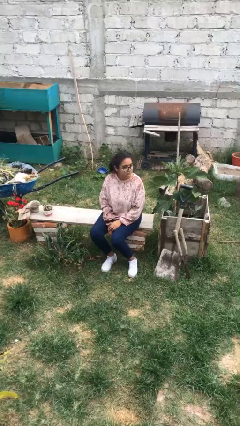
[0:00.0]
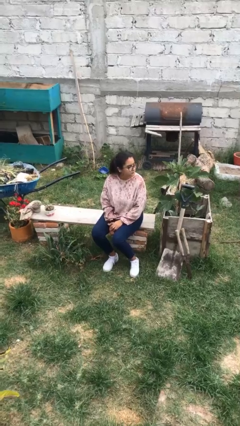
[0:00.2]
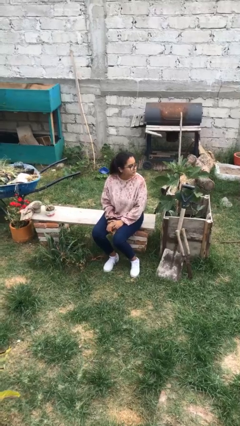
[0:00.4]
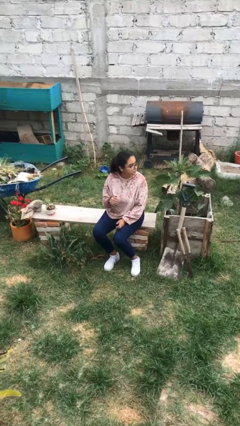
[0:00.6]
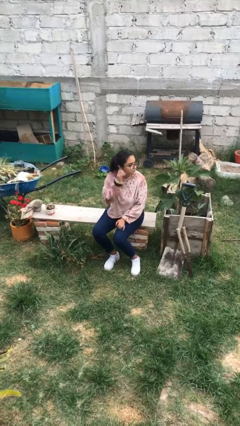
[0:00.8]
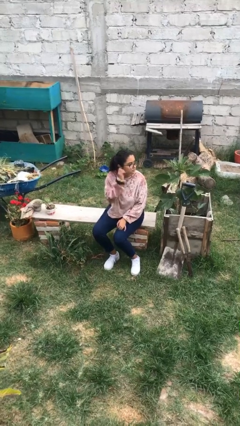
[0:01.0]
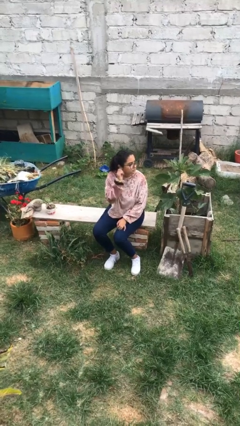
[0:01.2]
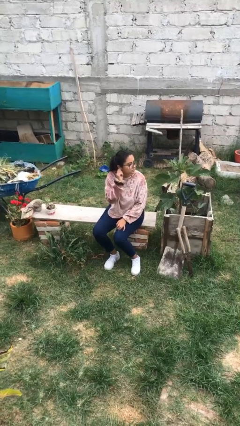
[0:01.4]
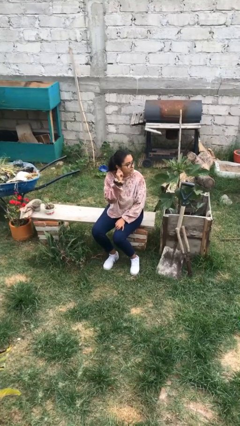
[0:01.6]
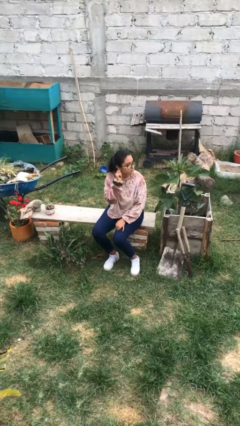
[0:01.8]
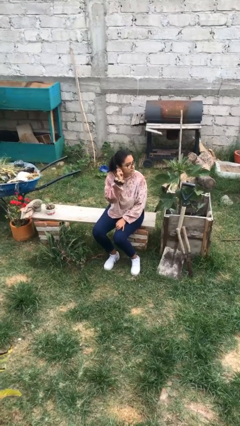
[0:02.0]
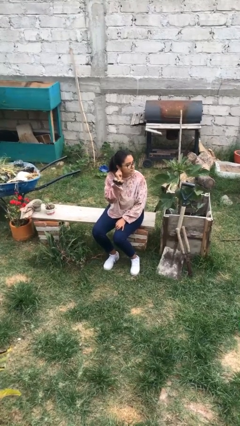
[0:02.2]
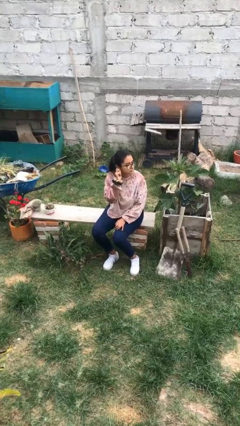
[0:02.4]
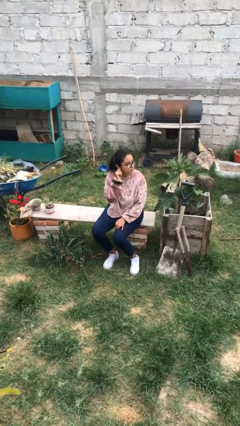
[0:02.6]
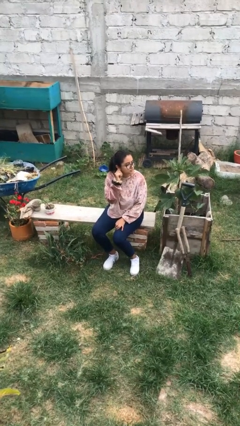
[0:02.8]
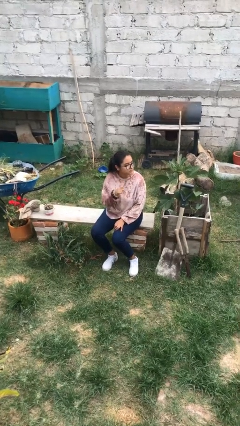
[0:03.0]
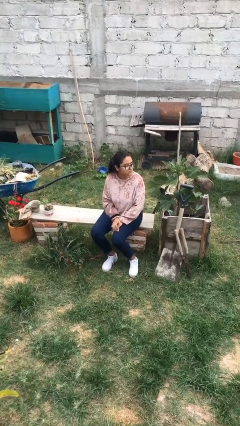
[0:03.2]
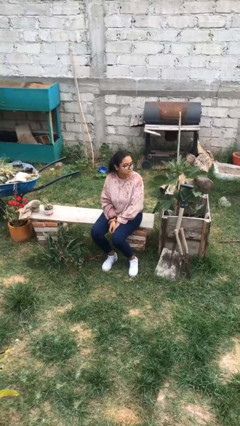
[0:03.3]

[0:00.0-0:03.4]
person touches earlobe

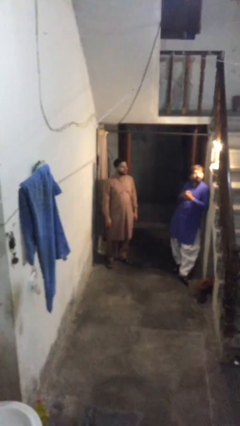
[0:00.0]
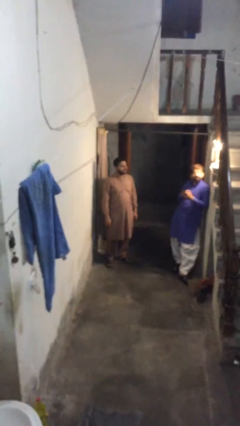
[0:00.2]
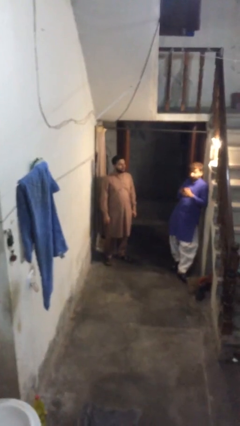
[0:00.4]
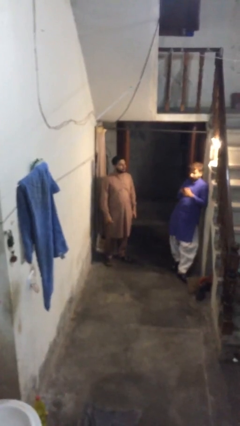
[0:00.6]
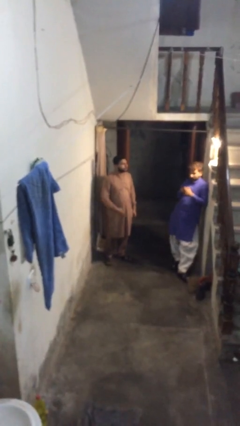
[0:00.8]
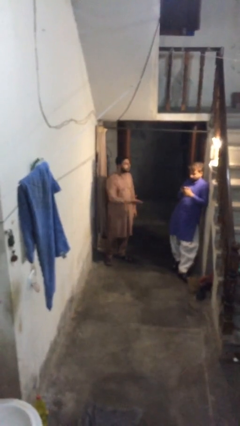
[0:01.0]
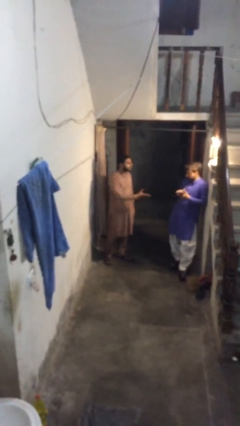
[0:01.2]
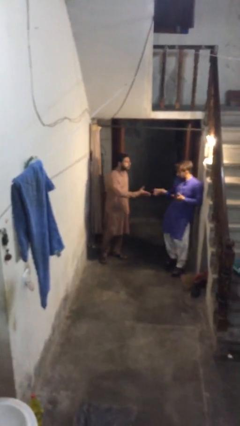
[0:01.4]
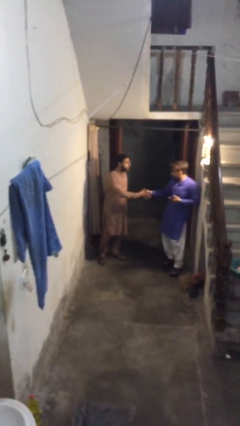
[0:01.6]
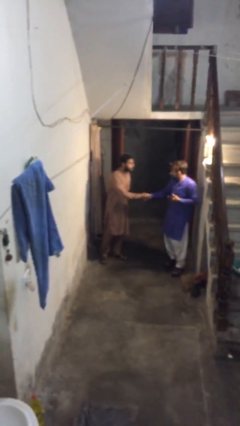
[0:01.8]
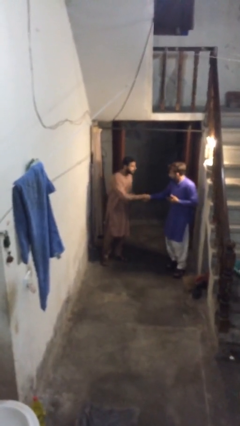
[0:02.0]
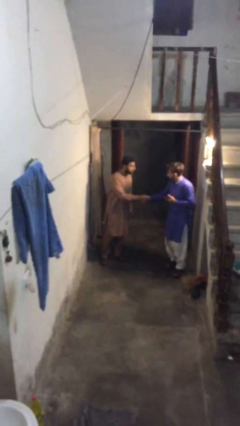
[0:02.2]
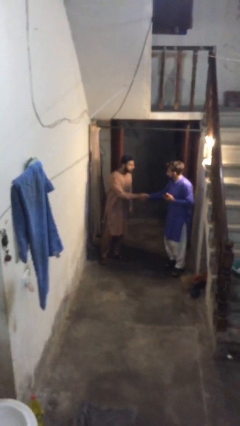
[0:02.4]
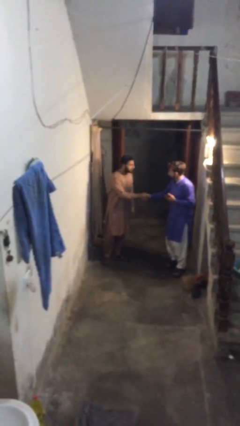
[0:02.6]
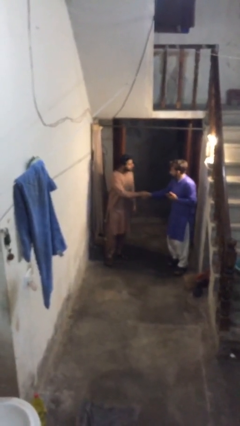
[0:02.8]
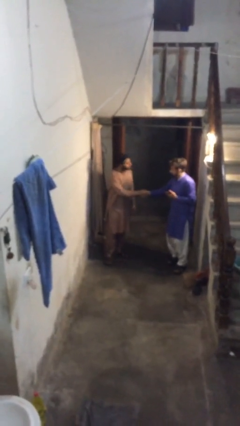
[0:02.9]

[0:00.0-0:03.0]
person shakes hand

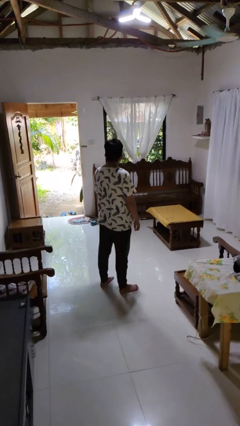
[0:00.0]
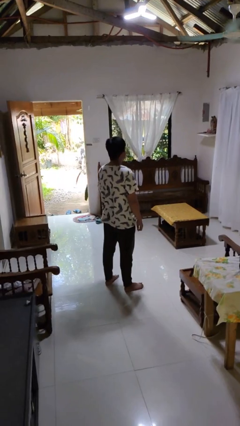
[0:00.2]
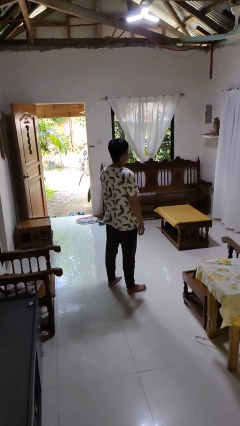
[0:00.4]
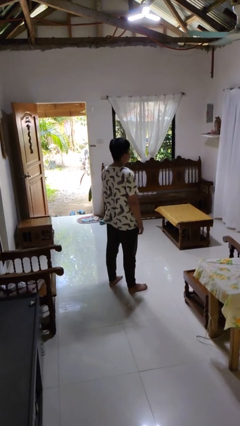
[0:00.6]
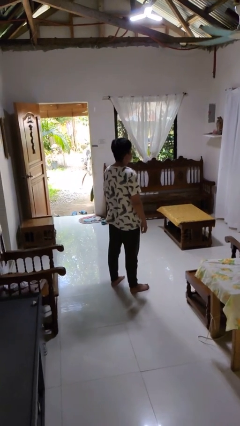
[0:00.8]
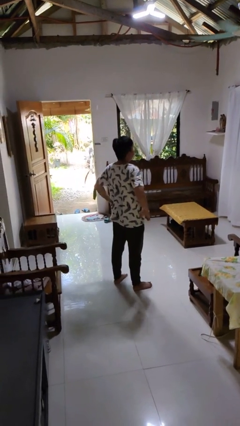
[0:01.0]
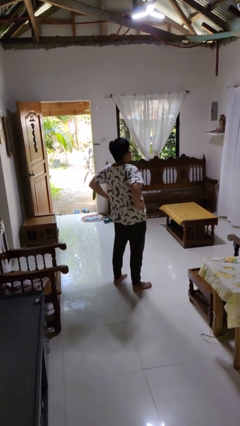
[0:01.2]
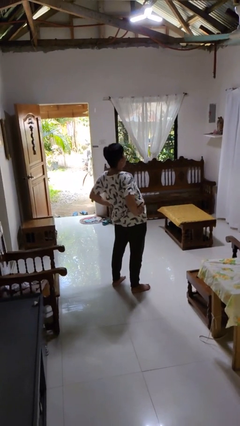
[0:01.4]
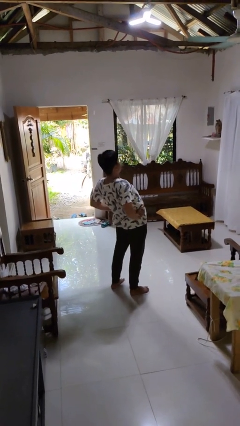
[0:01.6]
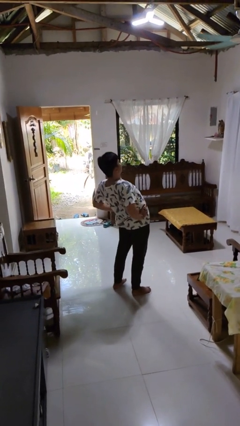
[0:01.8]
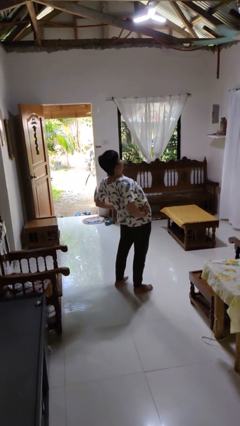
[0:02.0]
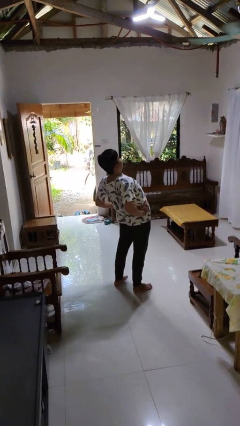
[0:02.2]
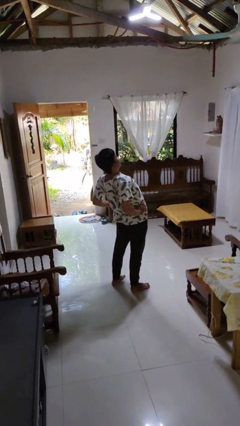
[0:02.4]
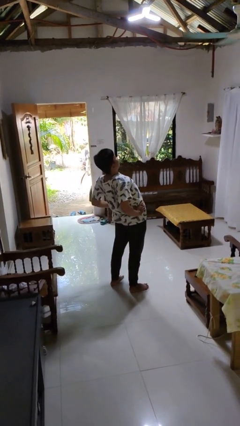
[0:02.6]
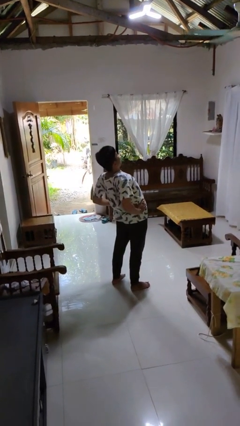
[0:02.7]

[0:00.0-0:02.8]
person stretches back

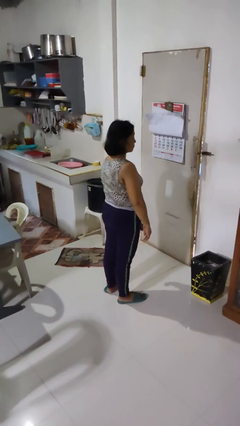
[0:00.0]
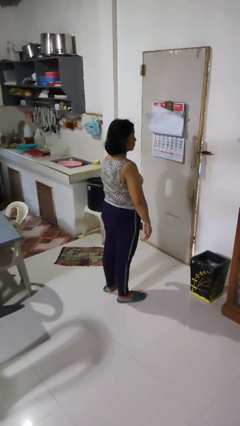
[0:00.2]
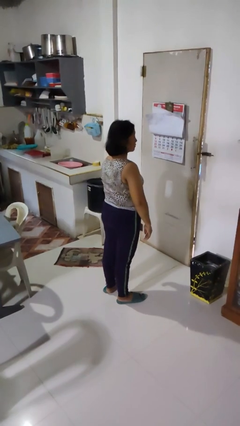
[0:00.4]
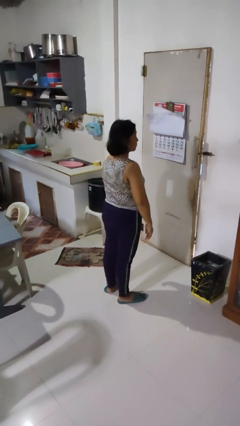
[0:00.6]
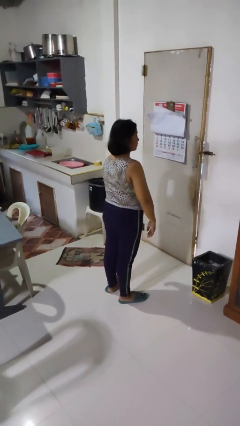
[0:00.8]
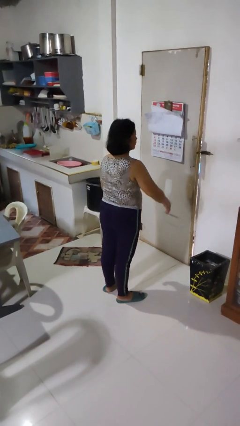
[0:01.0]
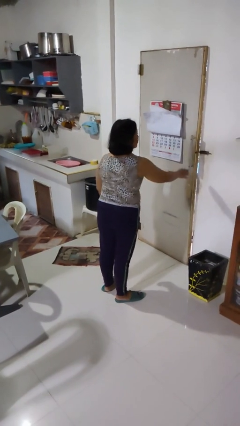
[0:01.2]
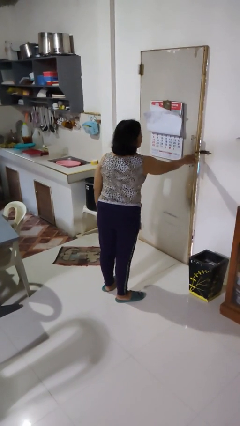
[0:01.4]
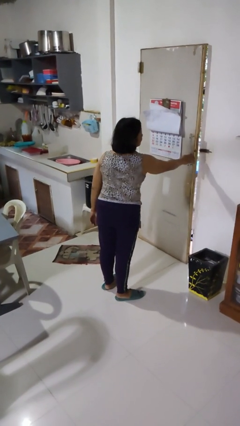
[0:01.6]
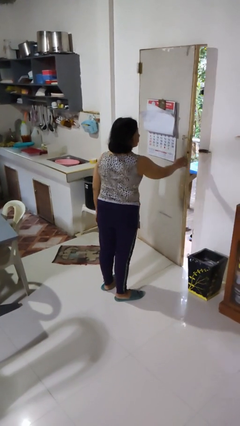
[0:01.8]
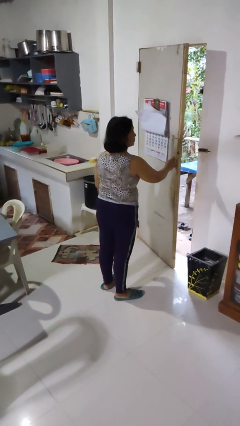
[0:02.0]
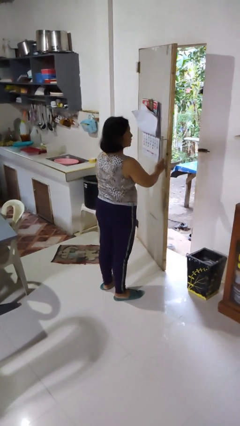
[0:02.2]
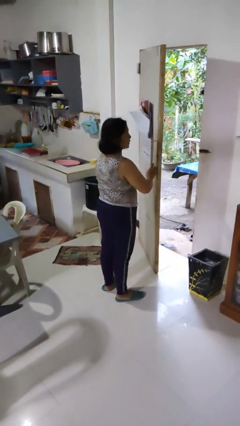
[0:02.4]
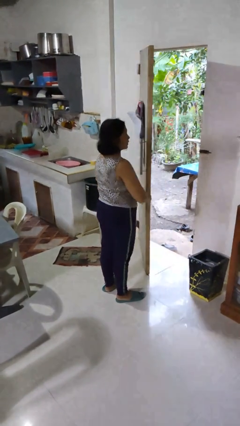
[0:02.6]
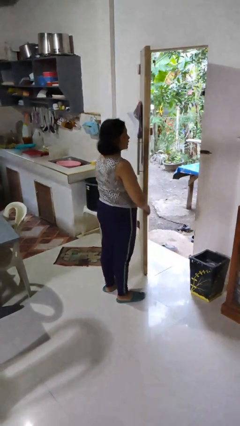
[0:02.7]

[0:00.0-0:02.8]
person opens facility door

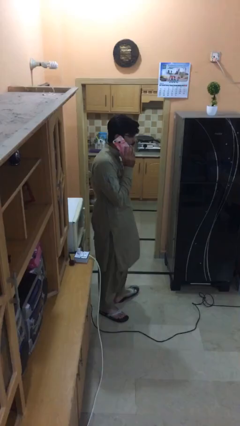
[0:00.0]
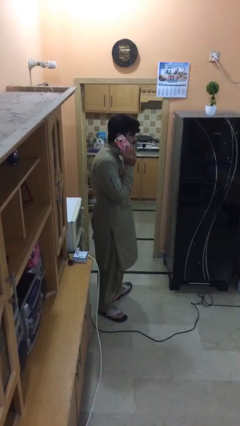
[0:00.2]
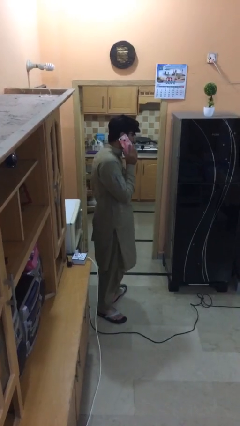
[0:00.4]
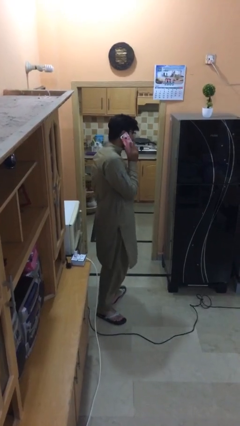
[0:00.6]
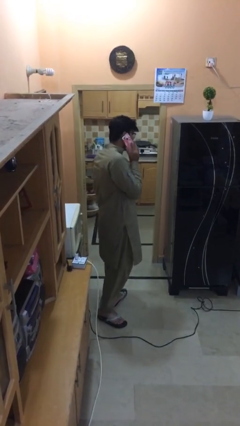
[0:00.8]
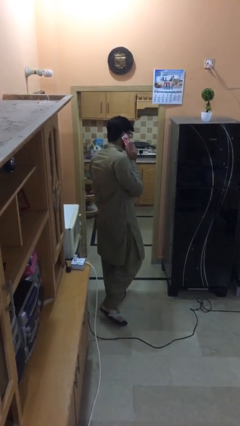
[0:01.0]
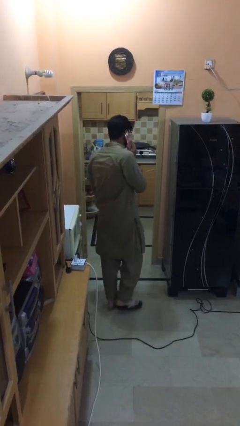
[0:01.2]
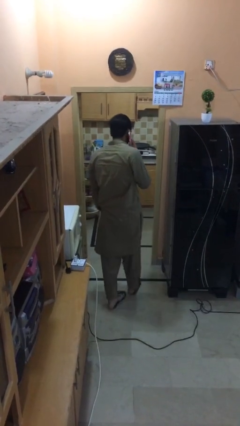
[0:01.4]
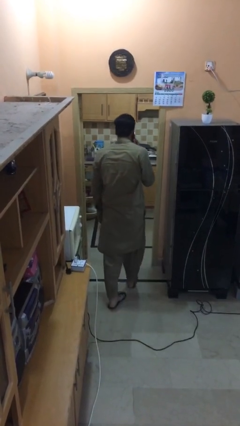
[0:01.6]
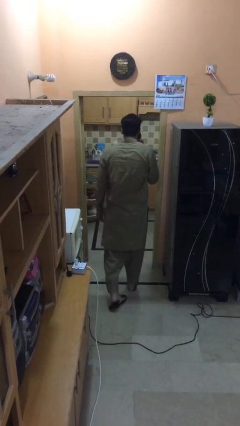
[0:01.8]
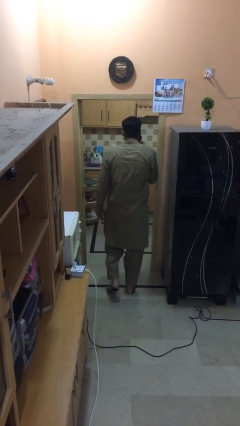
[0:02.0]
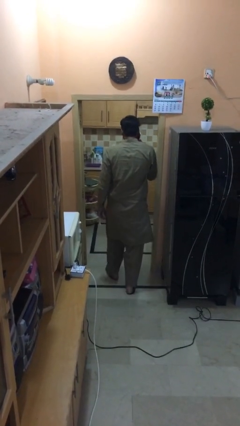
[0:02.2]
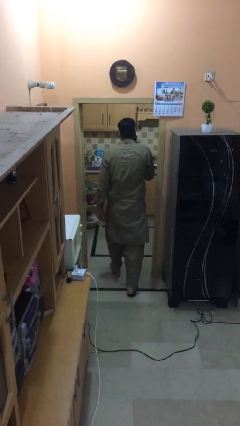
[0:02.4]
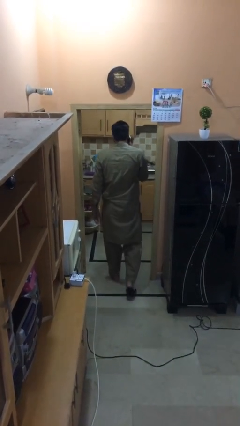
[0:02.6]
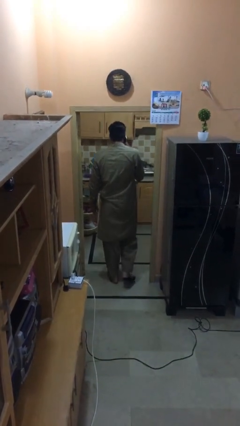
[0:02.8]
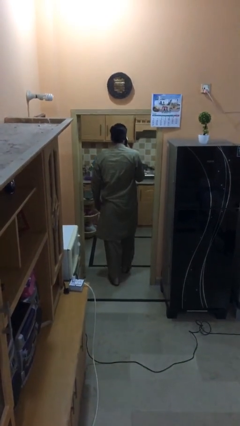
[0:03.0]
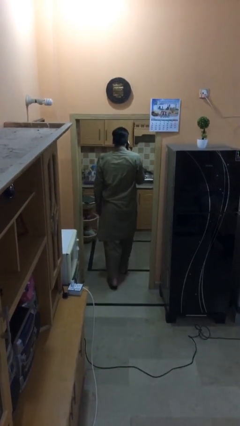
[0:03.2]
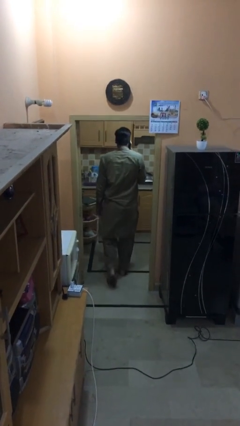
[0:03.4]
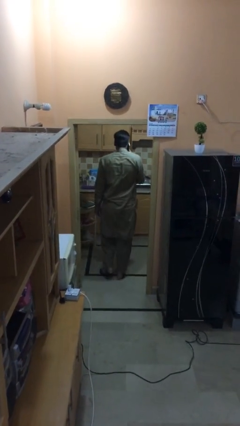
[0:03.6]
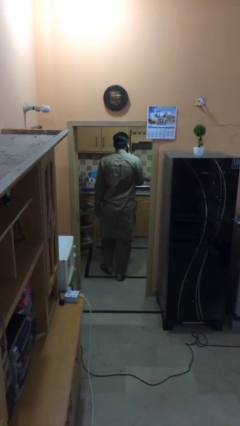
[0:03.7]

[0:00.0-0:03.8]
person exits scene through structure

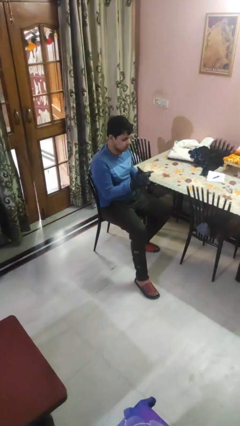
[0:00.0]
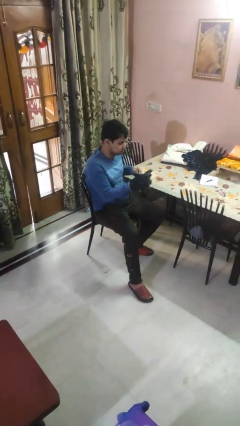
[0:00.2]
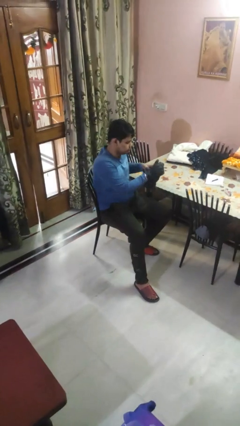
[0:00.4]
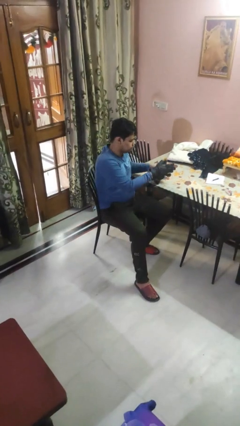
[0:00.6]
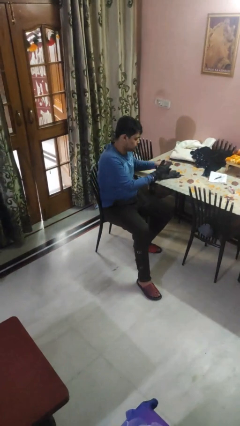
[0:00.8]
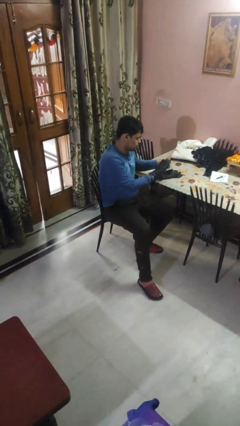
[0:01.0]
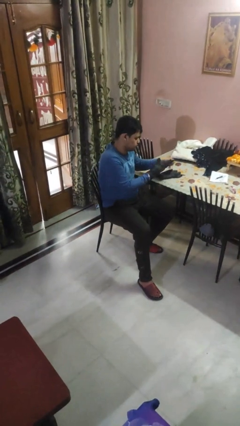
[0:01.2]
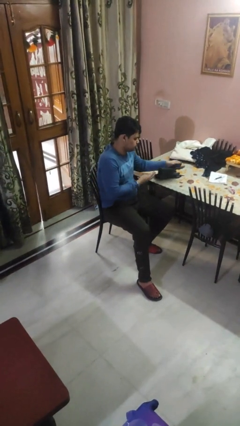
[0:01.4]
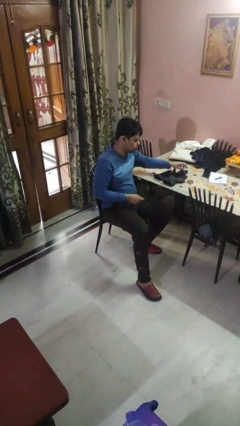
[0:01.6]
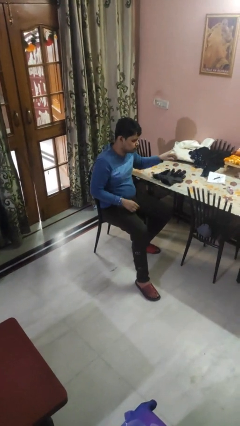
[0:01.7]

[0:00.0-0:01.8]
person takes off gloves
